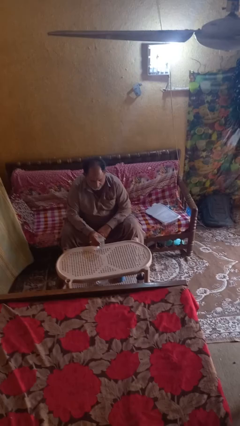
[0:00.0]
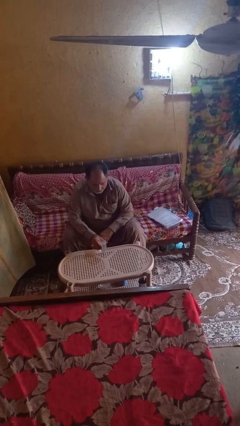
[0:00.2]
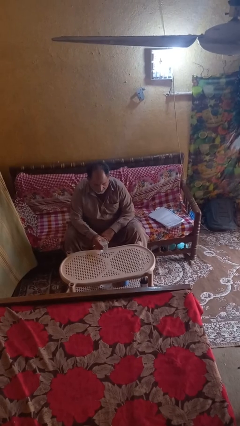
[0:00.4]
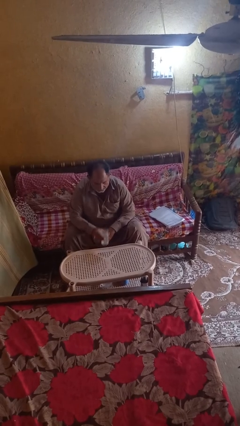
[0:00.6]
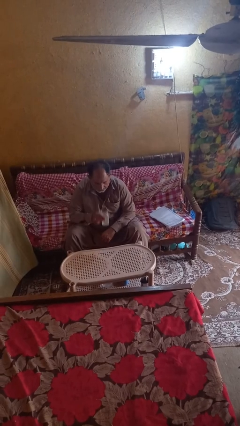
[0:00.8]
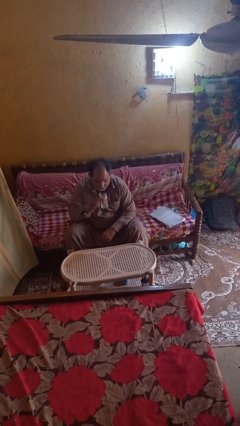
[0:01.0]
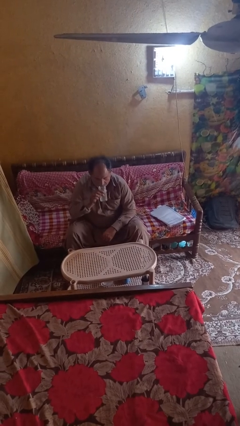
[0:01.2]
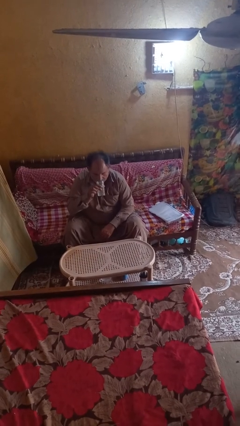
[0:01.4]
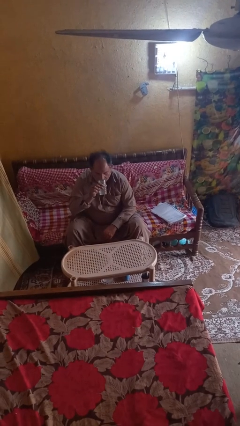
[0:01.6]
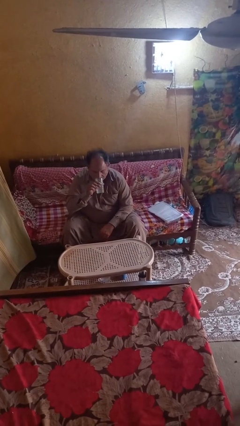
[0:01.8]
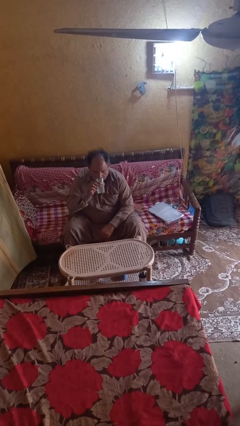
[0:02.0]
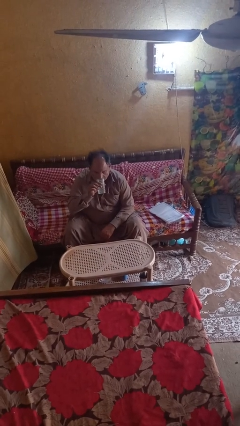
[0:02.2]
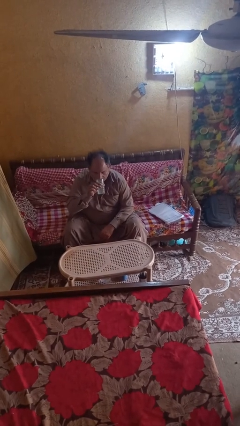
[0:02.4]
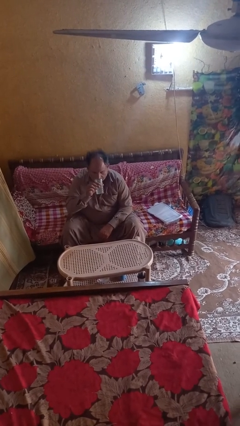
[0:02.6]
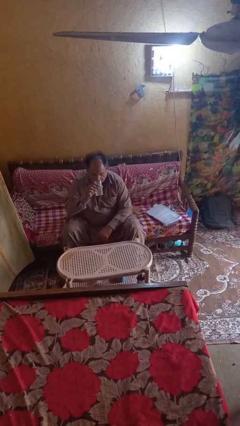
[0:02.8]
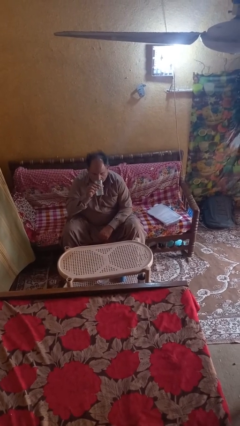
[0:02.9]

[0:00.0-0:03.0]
person drinks from shotglass

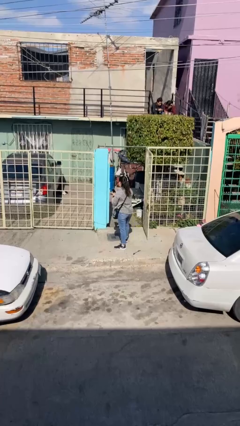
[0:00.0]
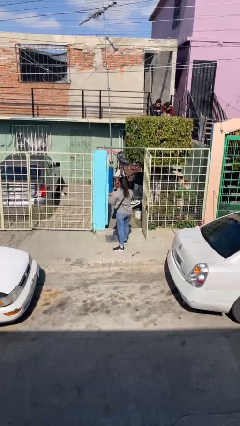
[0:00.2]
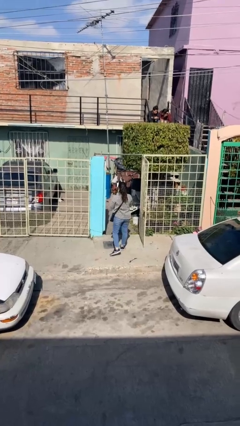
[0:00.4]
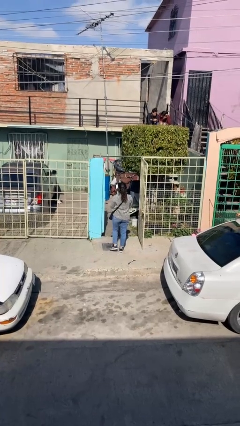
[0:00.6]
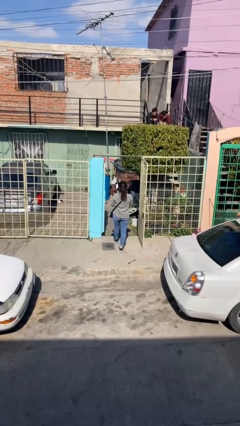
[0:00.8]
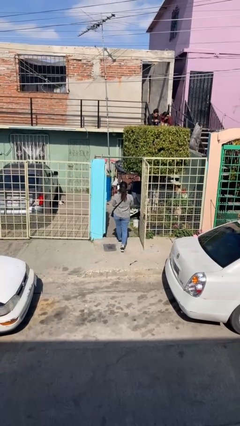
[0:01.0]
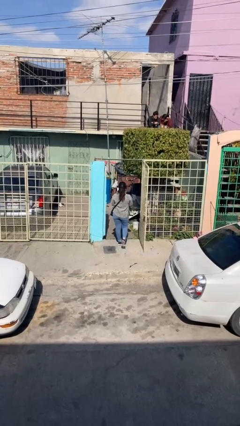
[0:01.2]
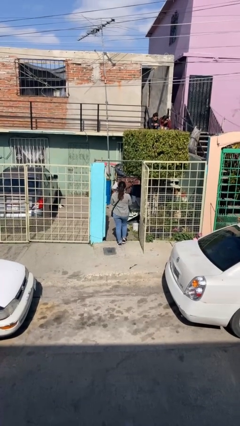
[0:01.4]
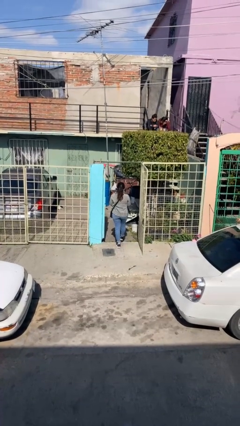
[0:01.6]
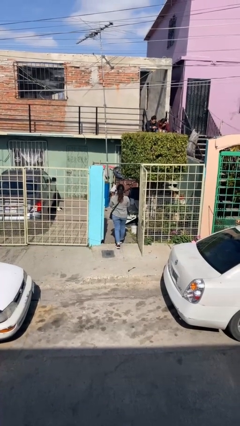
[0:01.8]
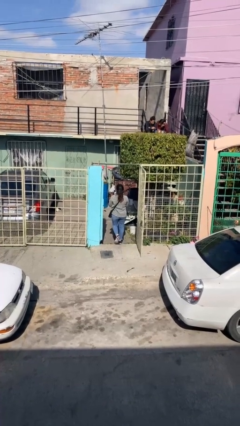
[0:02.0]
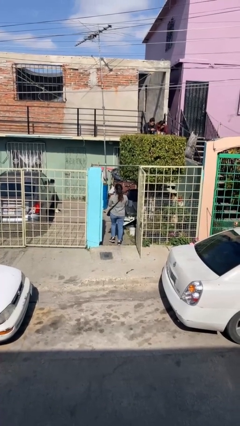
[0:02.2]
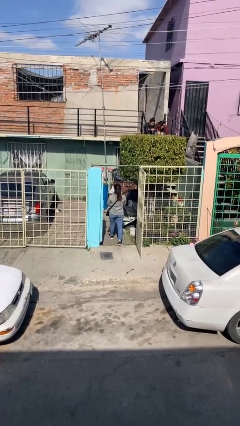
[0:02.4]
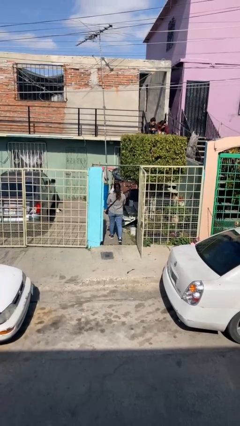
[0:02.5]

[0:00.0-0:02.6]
person exits scene through structure

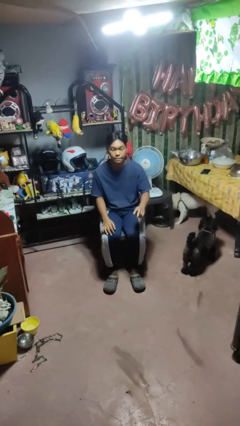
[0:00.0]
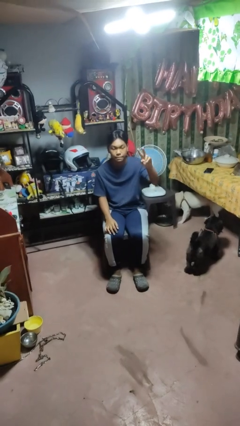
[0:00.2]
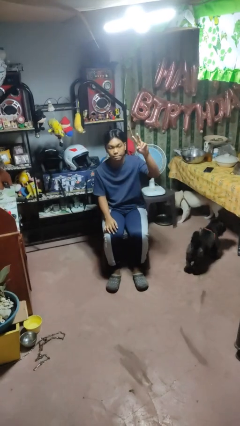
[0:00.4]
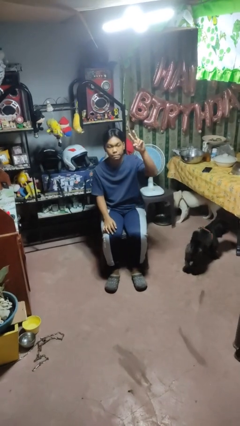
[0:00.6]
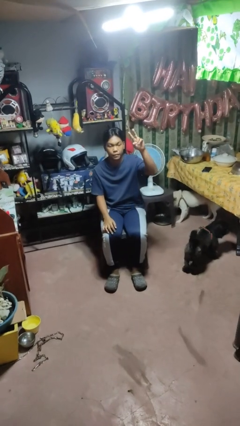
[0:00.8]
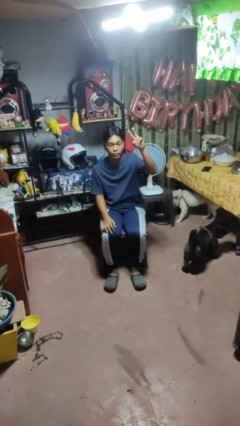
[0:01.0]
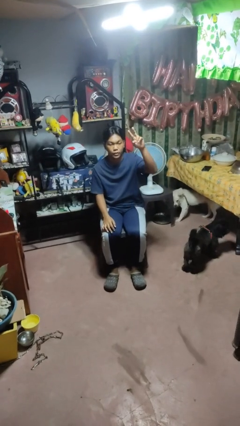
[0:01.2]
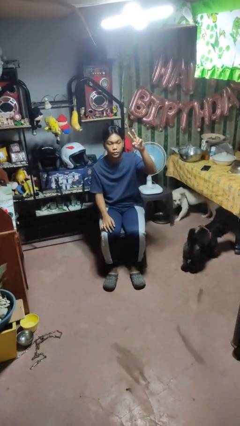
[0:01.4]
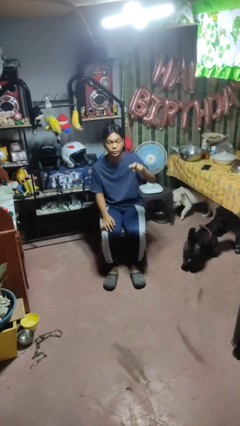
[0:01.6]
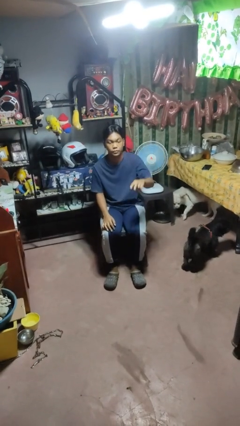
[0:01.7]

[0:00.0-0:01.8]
person gestures peace

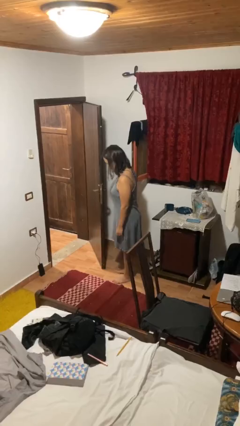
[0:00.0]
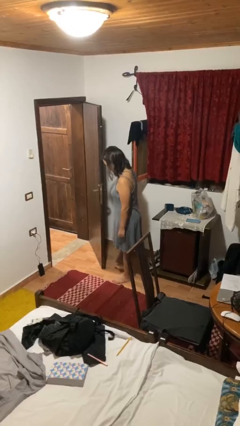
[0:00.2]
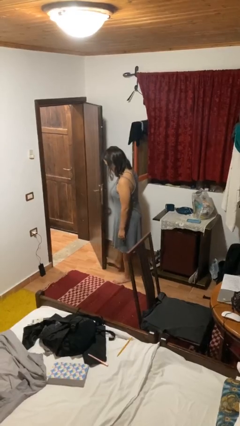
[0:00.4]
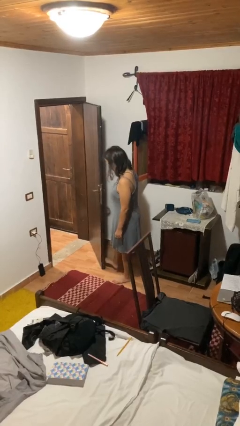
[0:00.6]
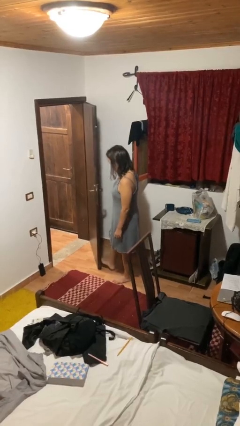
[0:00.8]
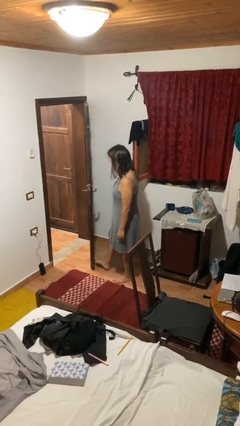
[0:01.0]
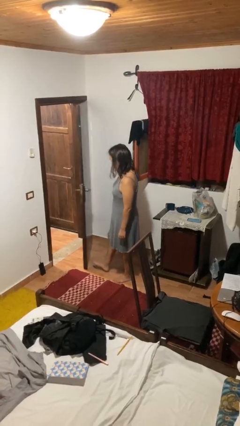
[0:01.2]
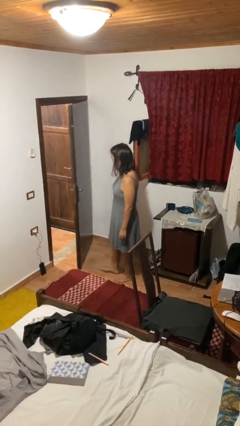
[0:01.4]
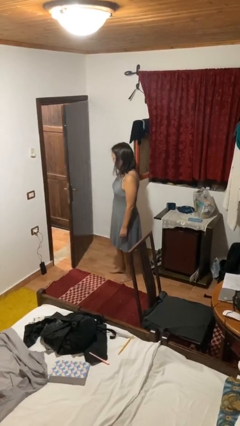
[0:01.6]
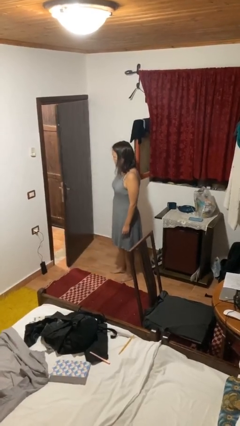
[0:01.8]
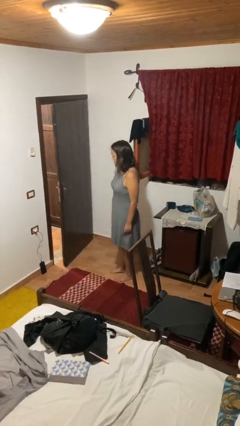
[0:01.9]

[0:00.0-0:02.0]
person closes door with foot

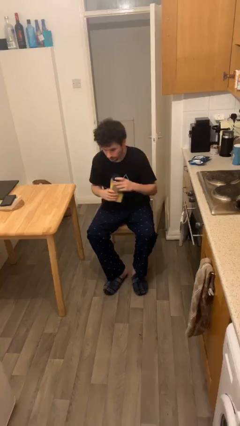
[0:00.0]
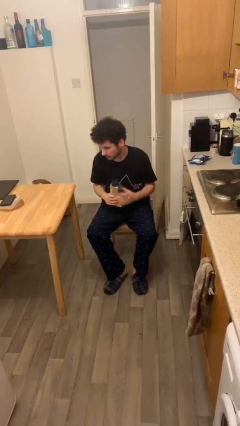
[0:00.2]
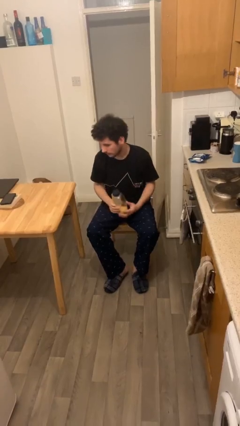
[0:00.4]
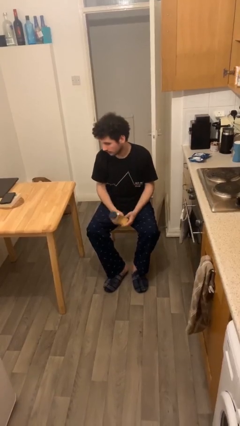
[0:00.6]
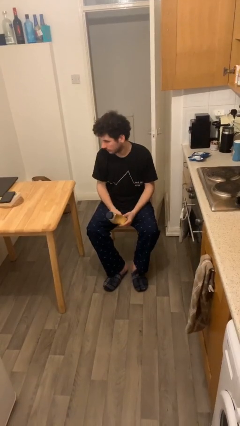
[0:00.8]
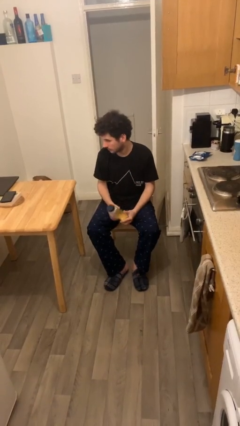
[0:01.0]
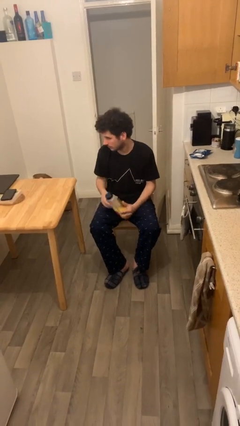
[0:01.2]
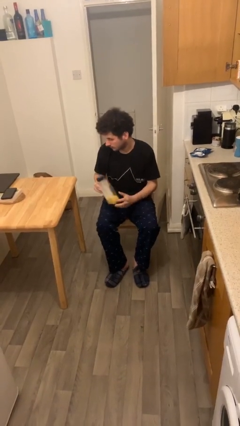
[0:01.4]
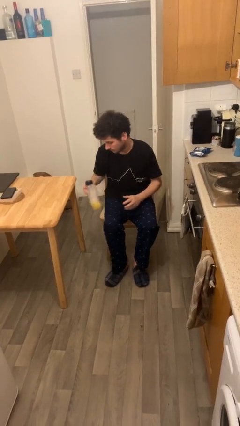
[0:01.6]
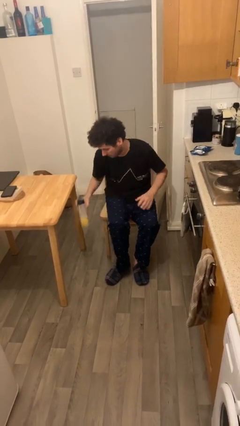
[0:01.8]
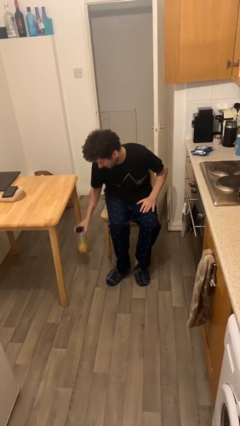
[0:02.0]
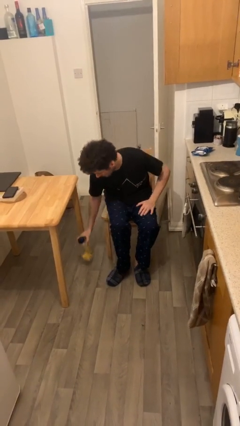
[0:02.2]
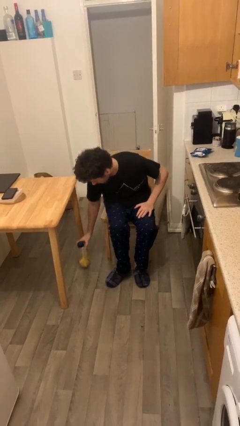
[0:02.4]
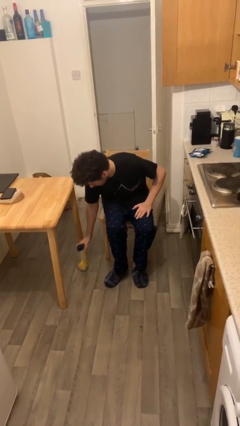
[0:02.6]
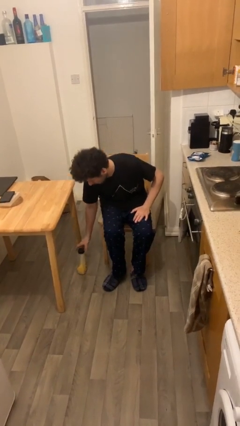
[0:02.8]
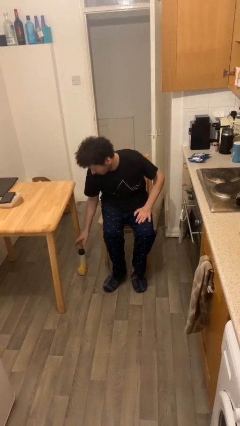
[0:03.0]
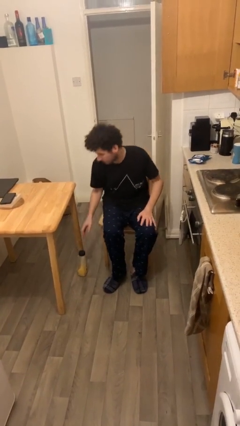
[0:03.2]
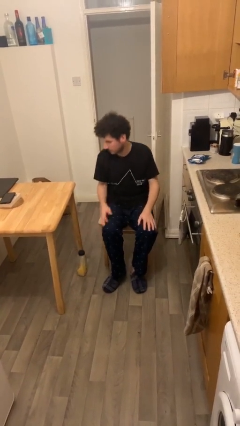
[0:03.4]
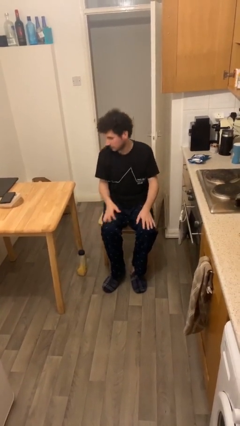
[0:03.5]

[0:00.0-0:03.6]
person puts down object on floor

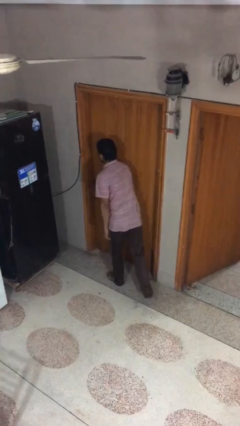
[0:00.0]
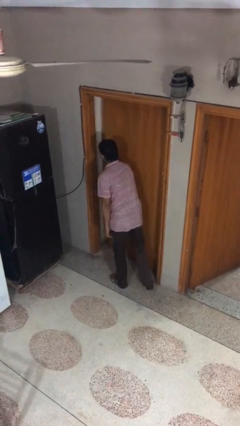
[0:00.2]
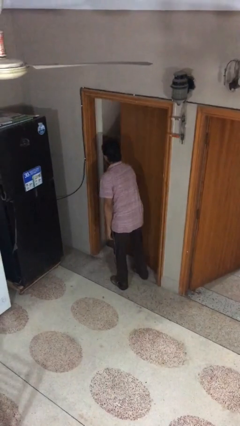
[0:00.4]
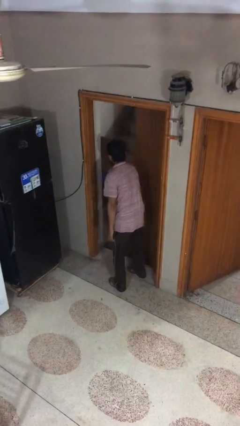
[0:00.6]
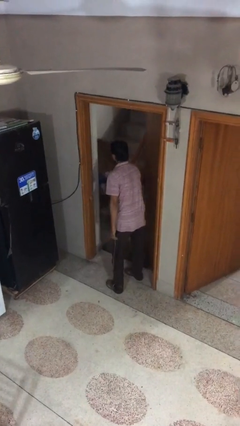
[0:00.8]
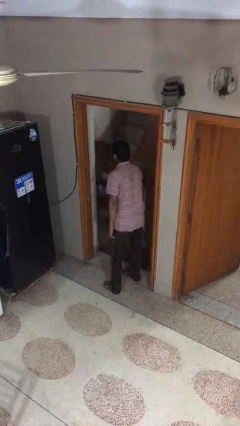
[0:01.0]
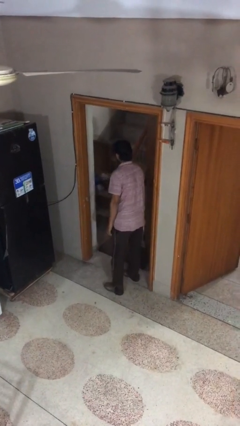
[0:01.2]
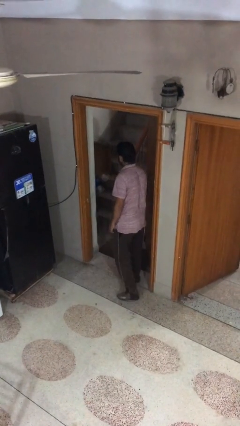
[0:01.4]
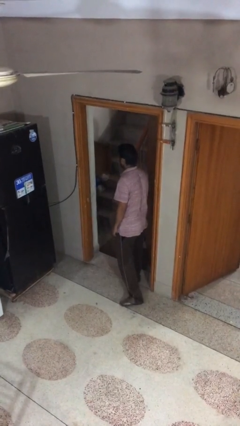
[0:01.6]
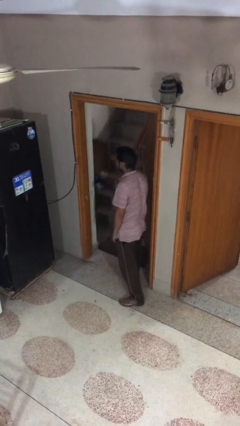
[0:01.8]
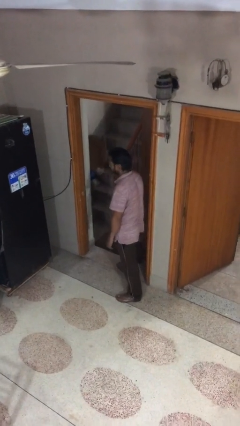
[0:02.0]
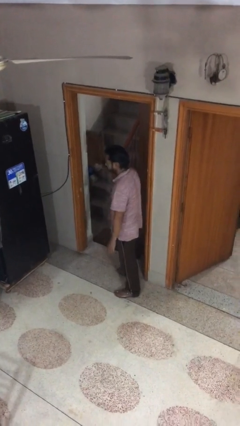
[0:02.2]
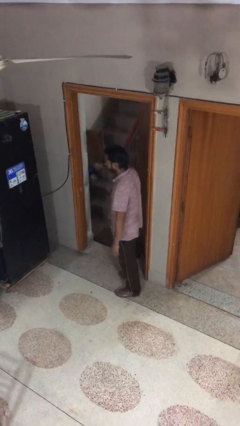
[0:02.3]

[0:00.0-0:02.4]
person opens facility door

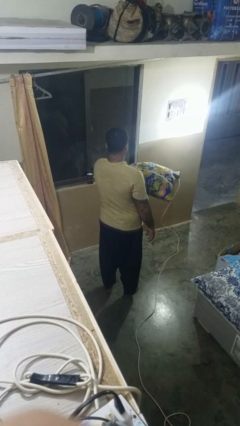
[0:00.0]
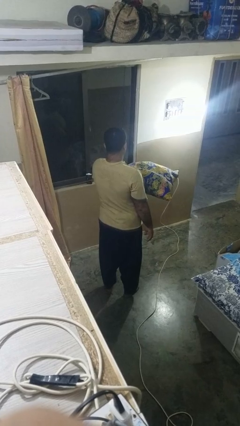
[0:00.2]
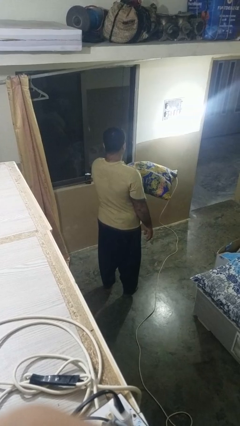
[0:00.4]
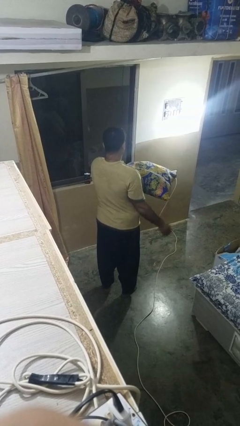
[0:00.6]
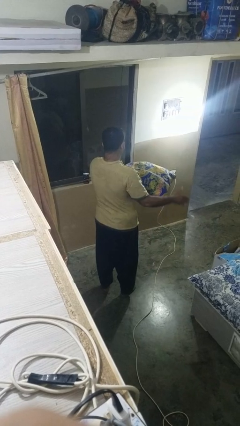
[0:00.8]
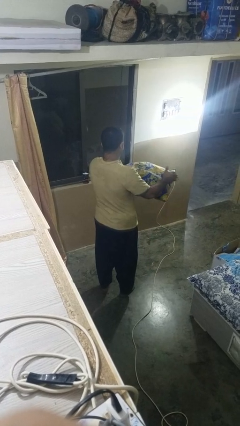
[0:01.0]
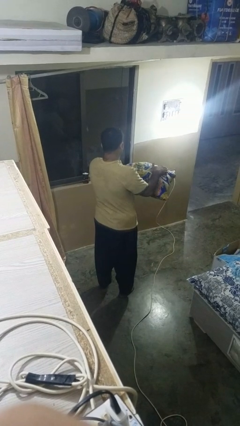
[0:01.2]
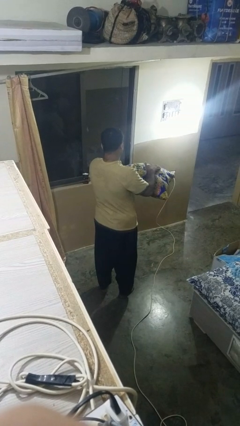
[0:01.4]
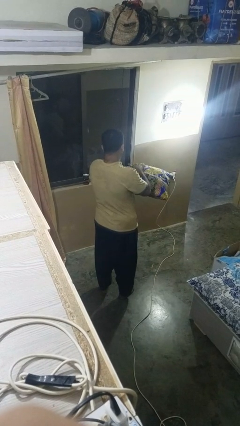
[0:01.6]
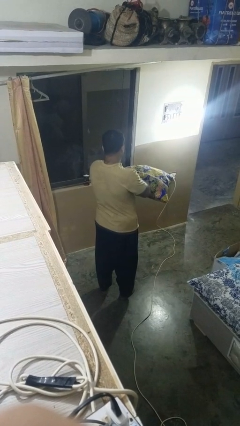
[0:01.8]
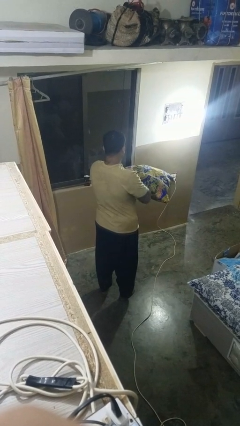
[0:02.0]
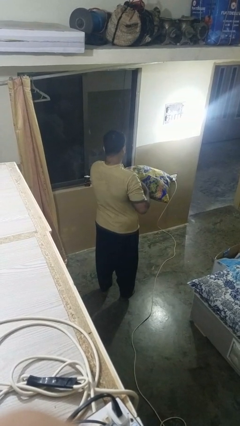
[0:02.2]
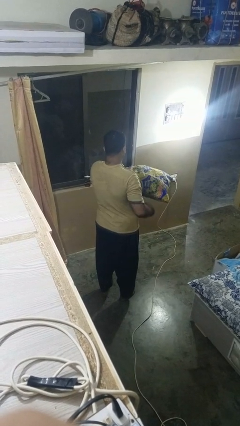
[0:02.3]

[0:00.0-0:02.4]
person waves hand over object
